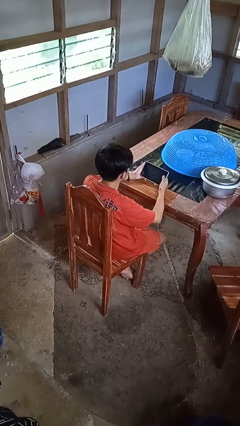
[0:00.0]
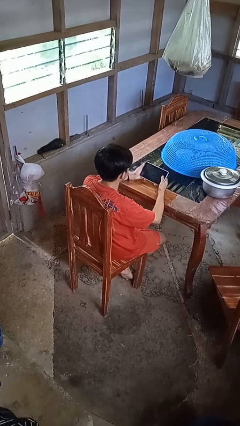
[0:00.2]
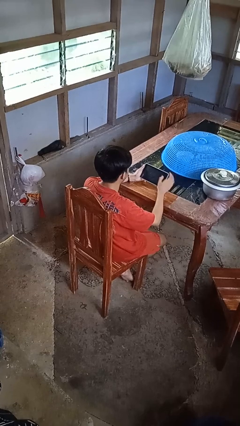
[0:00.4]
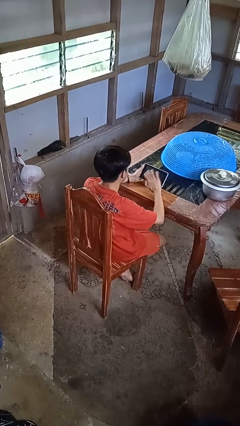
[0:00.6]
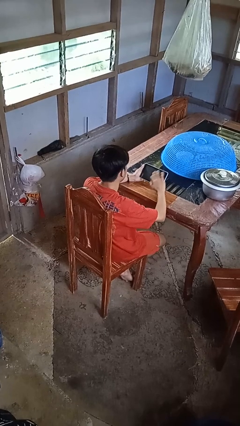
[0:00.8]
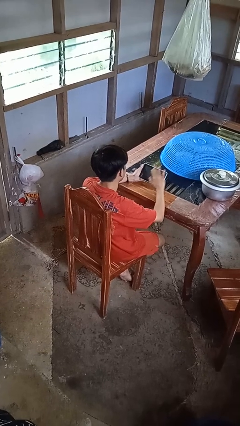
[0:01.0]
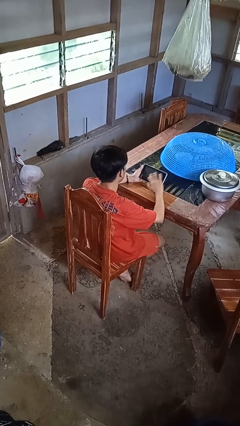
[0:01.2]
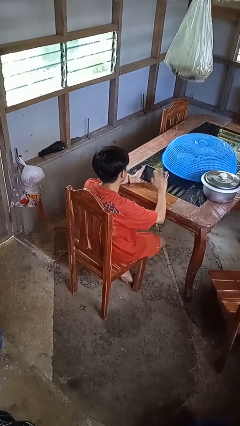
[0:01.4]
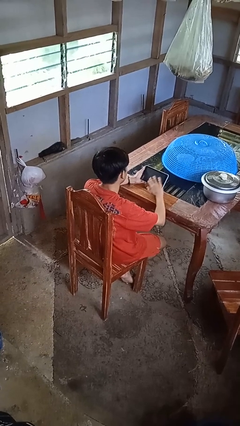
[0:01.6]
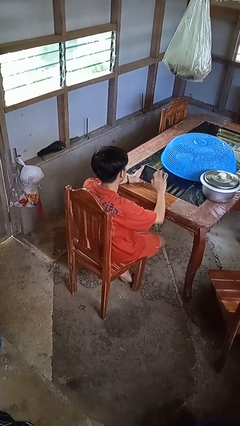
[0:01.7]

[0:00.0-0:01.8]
person interacts with tablet

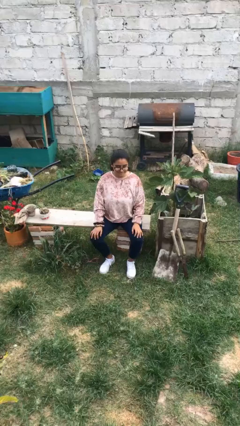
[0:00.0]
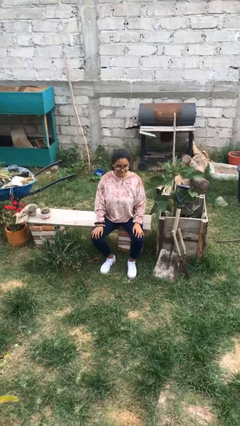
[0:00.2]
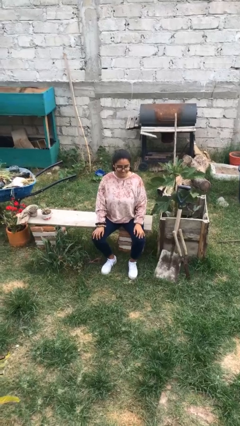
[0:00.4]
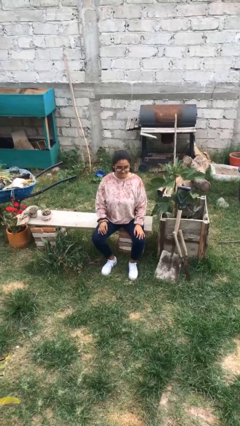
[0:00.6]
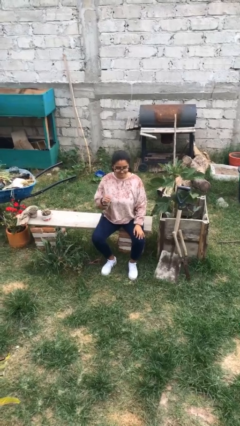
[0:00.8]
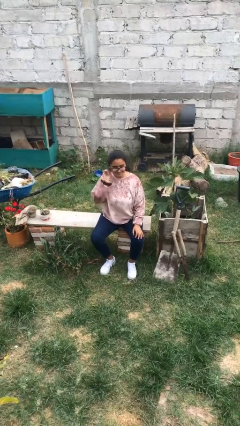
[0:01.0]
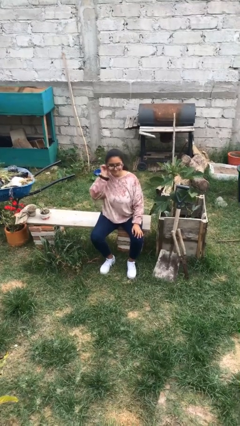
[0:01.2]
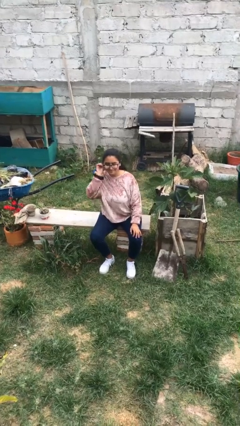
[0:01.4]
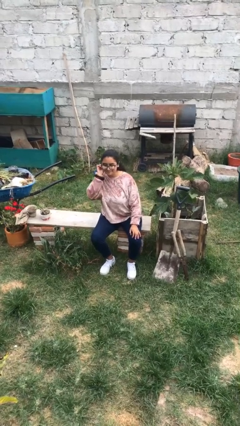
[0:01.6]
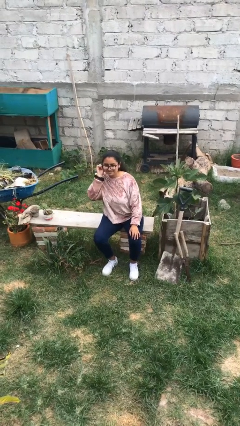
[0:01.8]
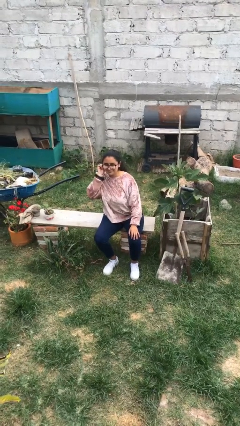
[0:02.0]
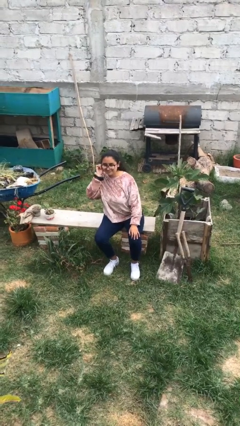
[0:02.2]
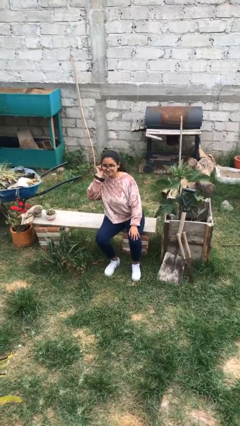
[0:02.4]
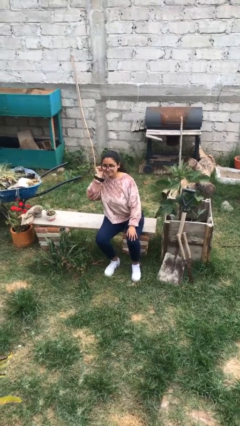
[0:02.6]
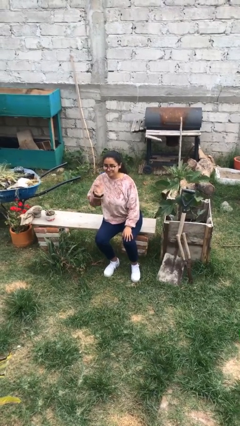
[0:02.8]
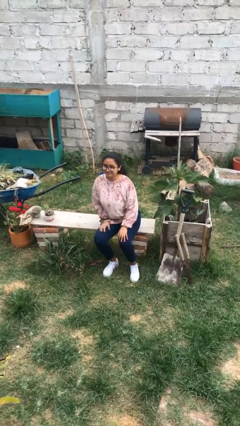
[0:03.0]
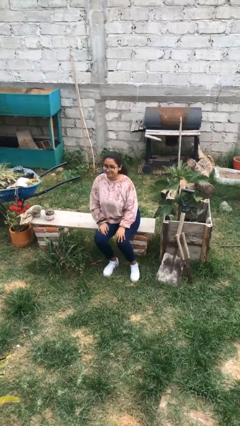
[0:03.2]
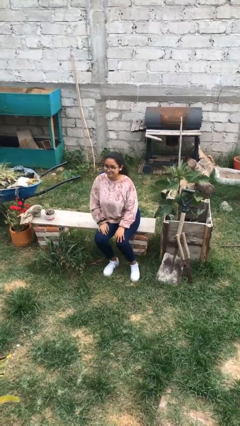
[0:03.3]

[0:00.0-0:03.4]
person touches earlobe

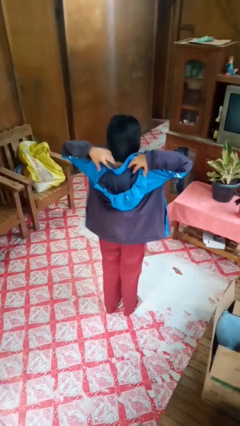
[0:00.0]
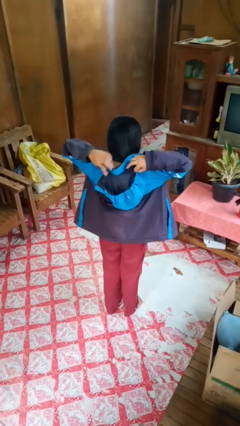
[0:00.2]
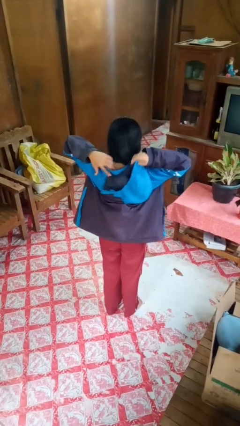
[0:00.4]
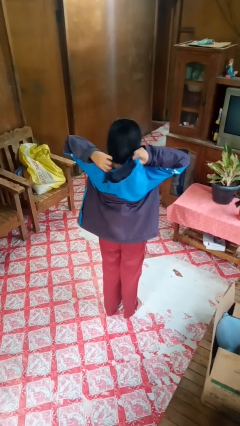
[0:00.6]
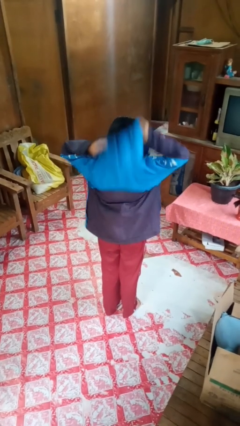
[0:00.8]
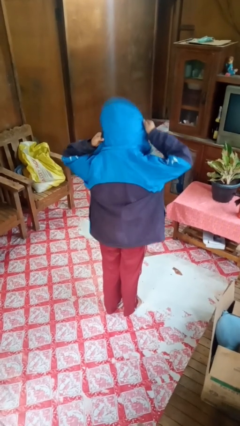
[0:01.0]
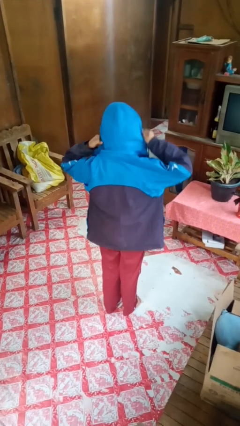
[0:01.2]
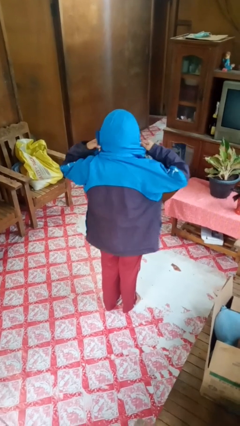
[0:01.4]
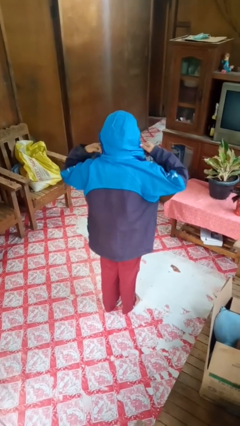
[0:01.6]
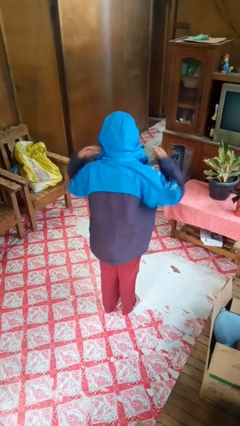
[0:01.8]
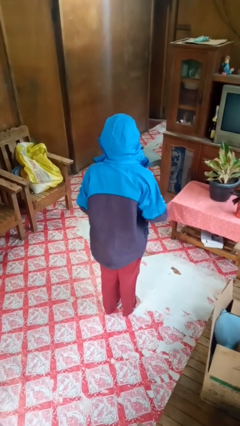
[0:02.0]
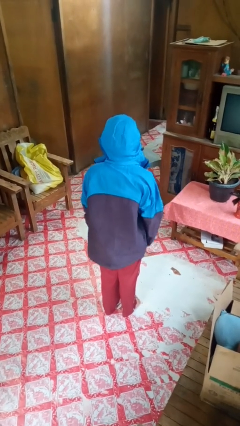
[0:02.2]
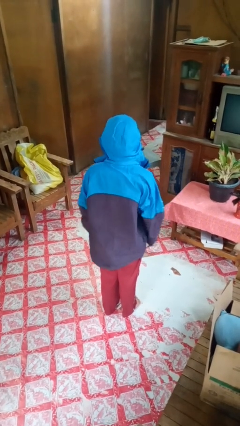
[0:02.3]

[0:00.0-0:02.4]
person puts on hoodie

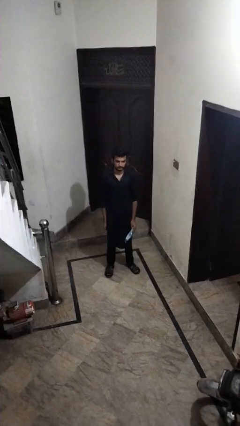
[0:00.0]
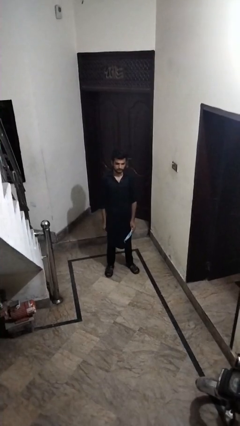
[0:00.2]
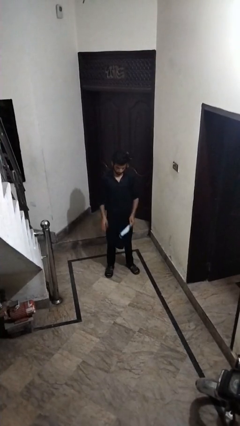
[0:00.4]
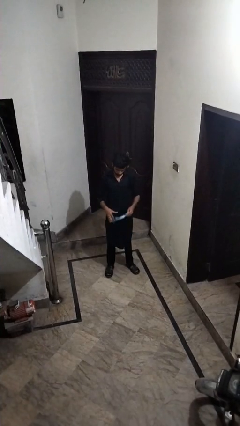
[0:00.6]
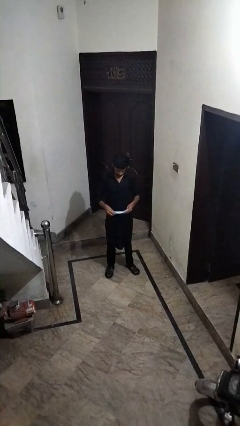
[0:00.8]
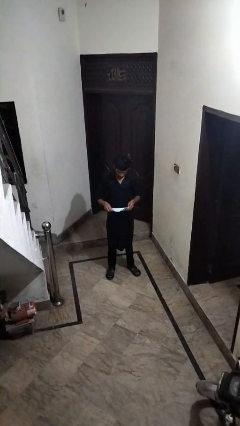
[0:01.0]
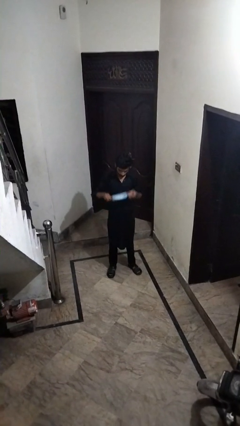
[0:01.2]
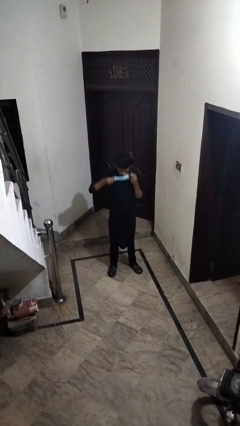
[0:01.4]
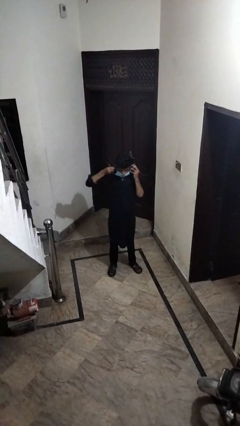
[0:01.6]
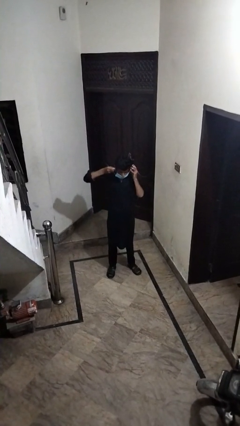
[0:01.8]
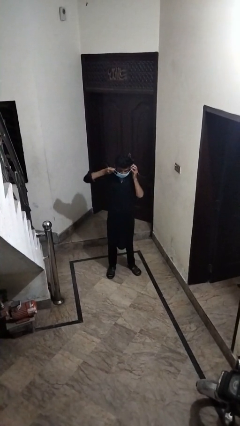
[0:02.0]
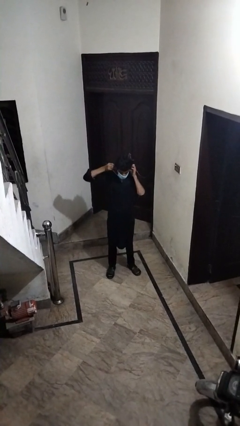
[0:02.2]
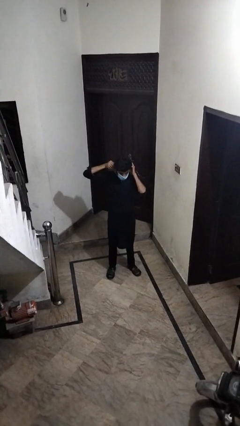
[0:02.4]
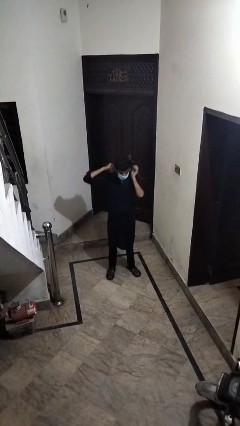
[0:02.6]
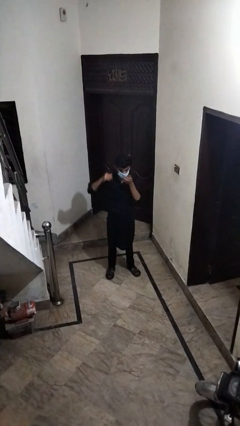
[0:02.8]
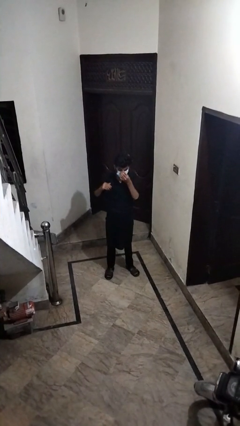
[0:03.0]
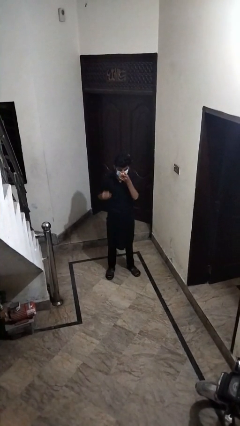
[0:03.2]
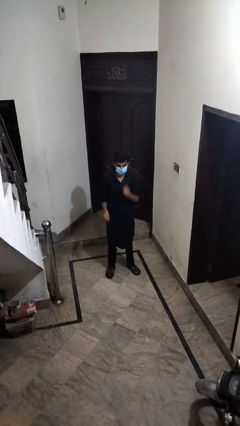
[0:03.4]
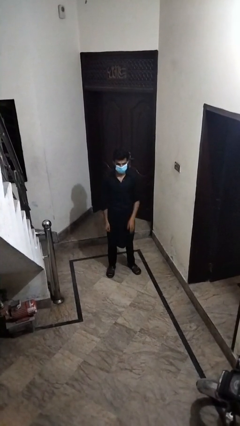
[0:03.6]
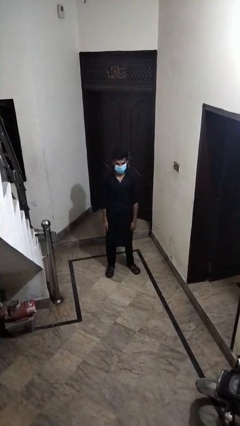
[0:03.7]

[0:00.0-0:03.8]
person puts on facemask

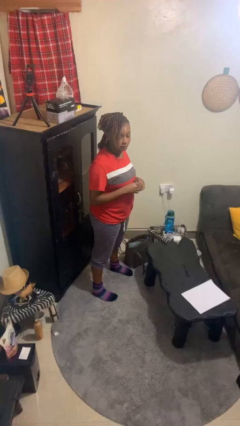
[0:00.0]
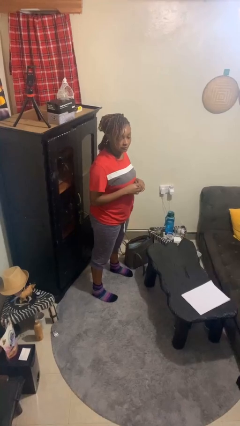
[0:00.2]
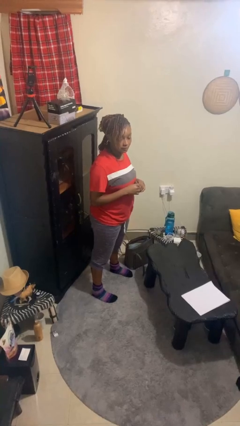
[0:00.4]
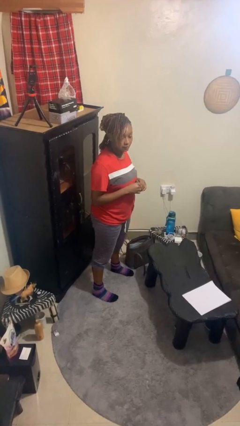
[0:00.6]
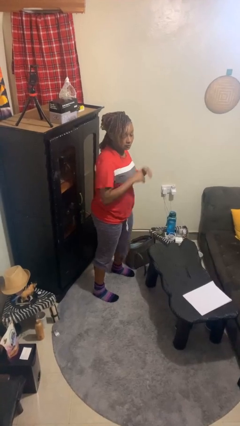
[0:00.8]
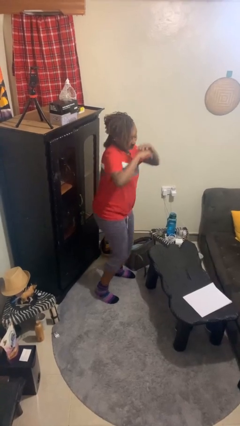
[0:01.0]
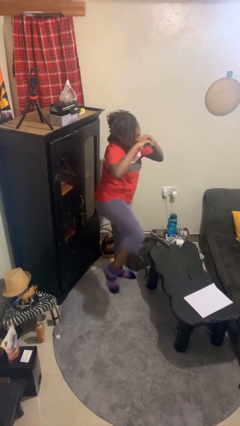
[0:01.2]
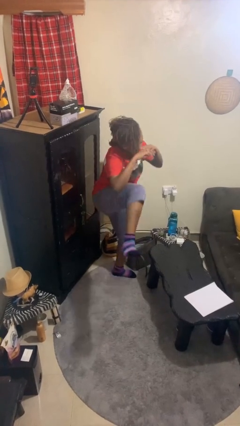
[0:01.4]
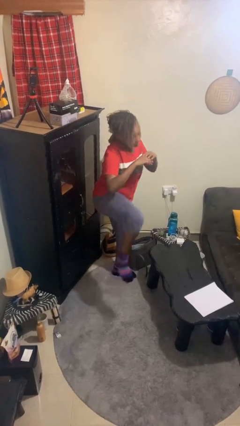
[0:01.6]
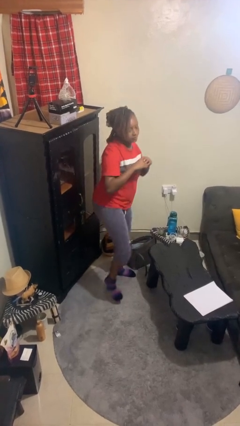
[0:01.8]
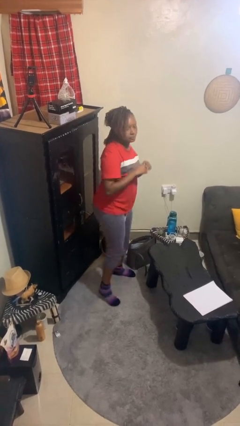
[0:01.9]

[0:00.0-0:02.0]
person karate kicks

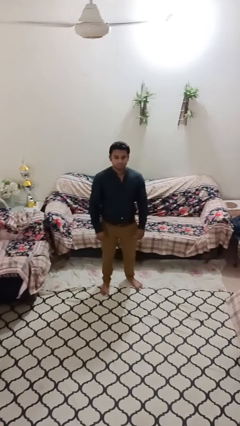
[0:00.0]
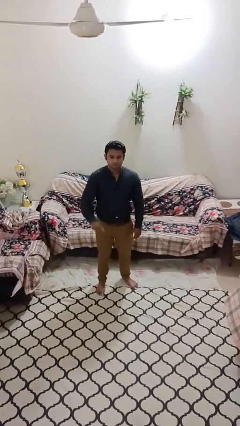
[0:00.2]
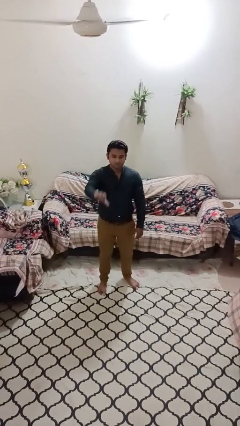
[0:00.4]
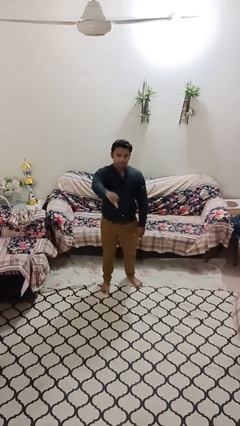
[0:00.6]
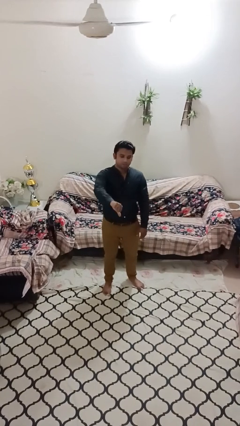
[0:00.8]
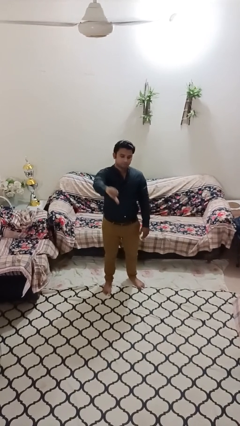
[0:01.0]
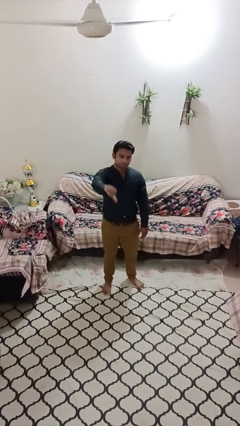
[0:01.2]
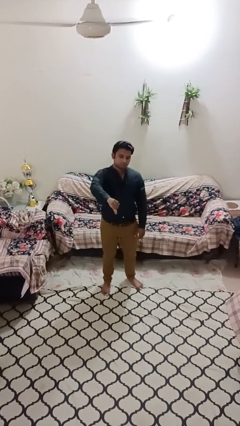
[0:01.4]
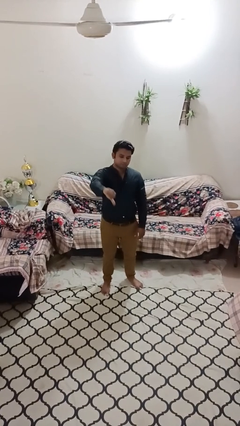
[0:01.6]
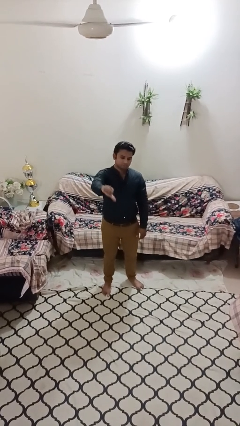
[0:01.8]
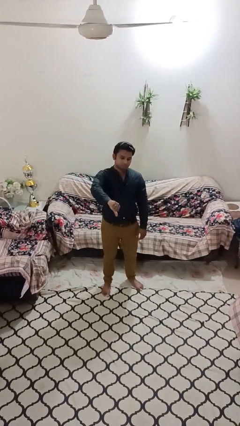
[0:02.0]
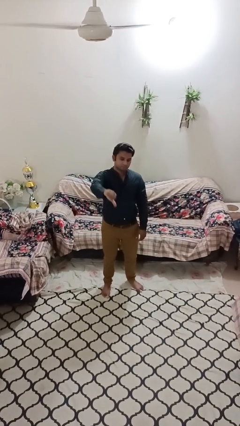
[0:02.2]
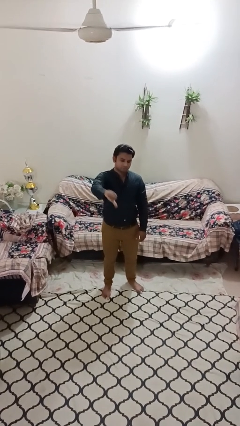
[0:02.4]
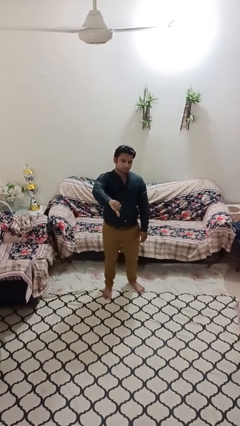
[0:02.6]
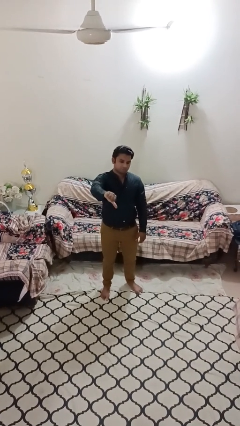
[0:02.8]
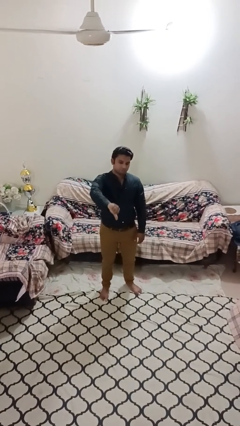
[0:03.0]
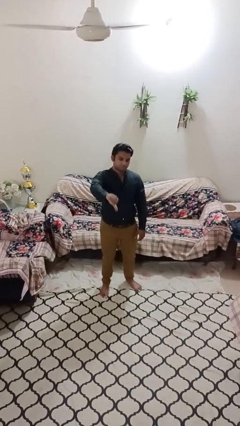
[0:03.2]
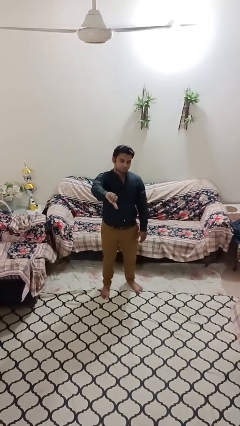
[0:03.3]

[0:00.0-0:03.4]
person gestures thumbs down

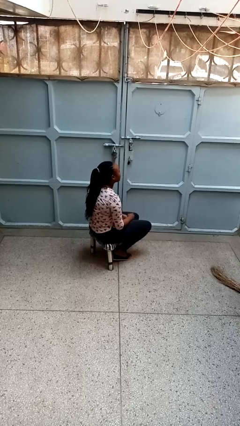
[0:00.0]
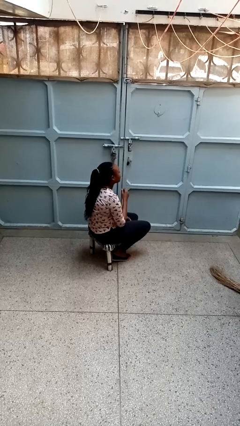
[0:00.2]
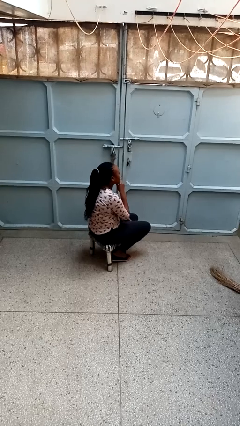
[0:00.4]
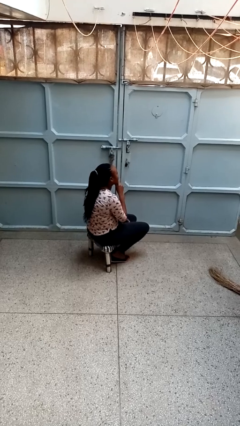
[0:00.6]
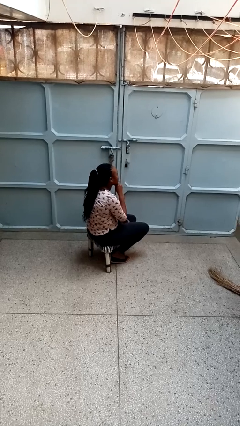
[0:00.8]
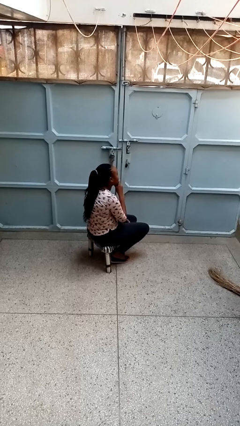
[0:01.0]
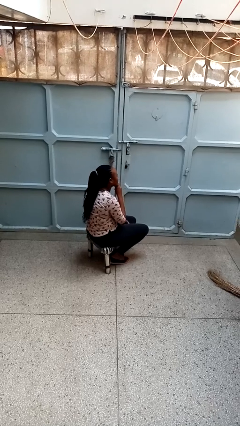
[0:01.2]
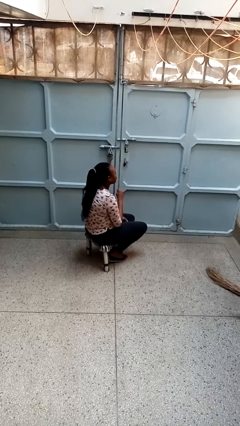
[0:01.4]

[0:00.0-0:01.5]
person strokes chin
